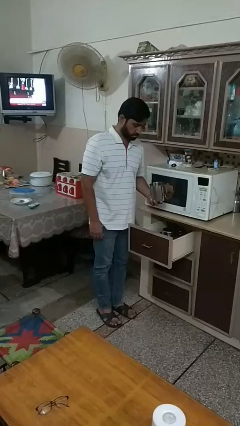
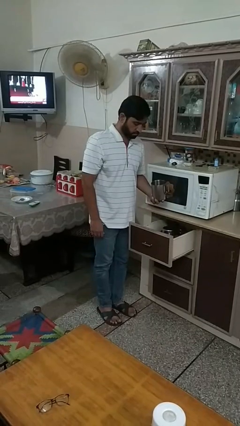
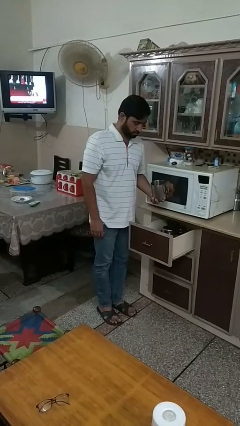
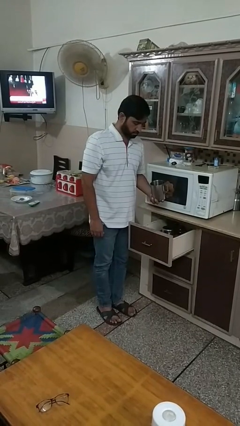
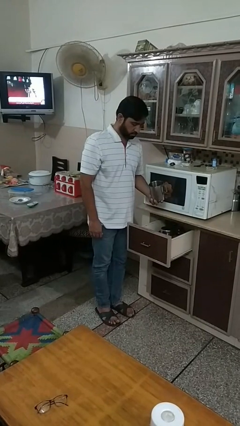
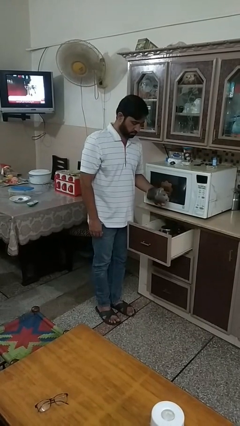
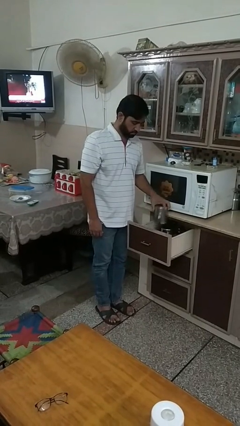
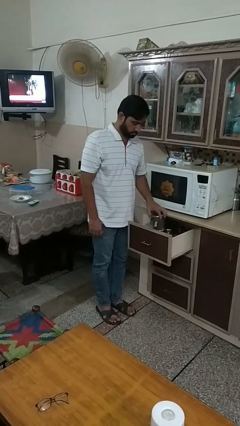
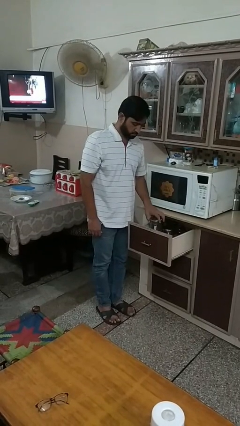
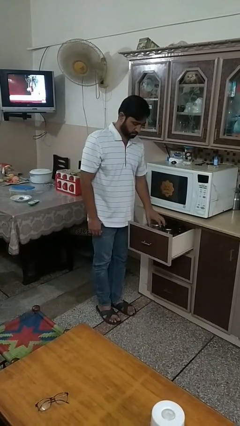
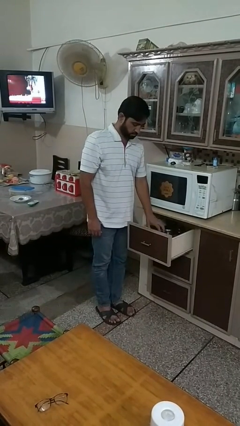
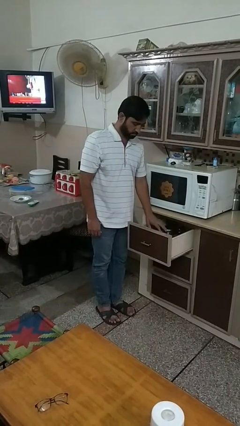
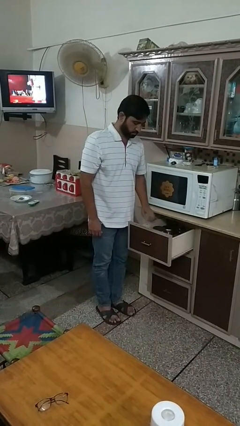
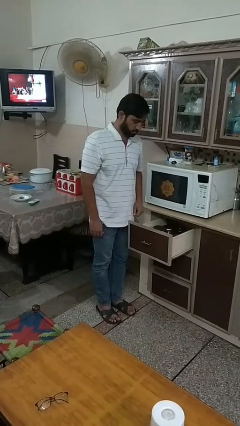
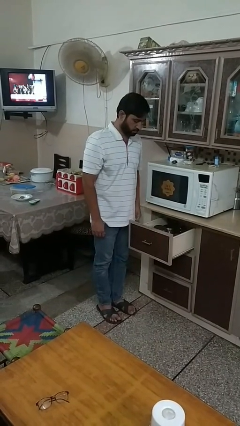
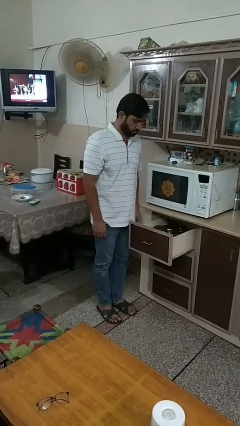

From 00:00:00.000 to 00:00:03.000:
person puts object into kitchen drawer

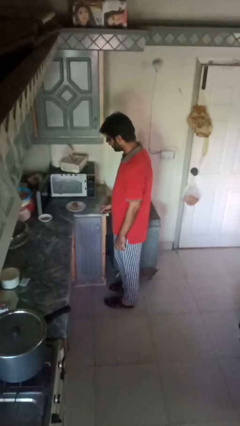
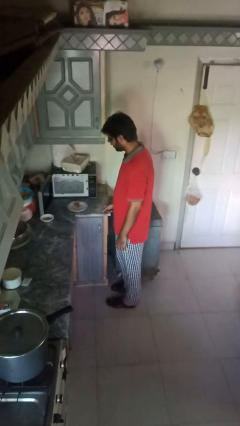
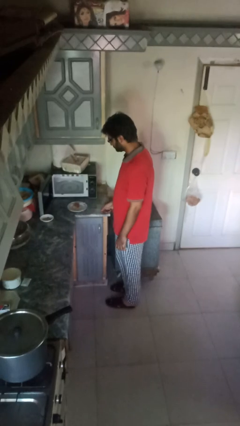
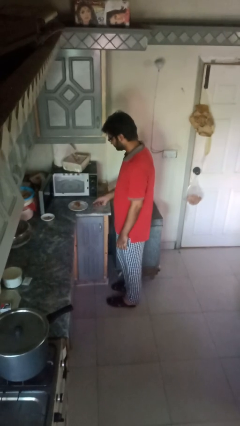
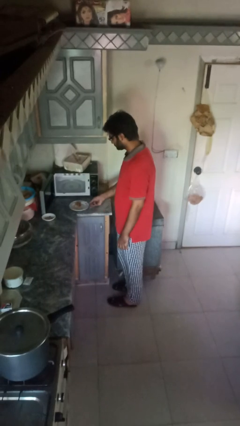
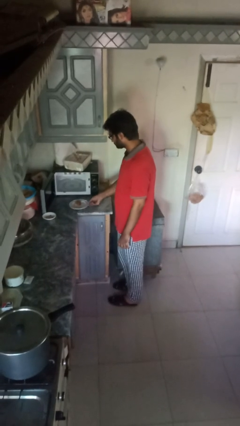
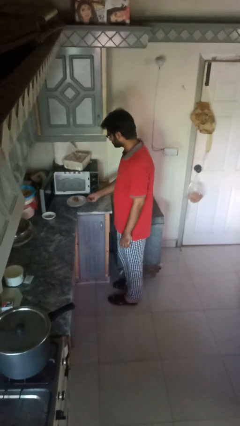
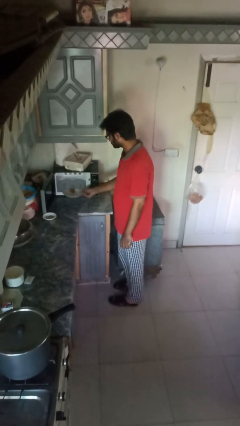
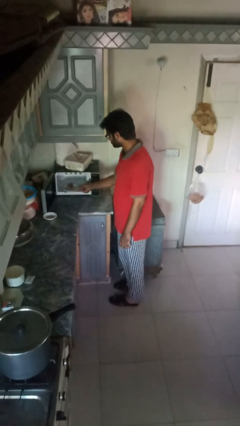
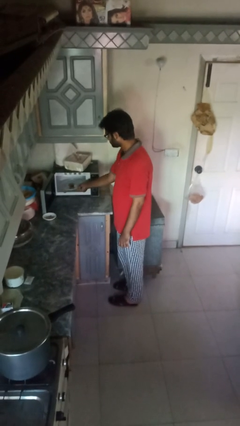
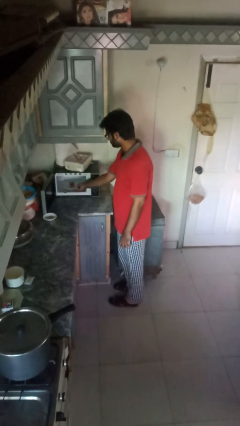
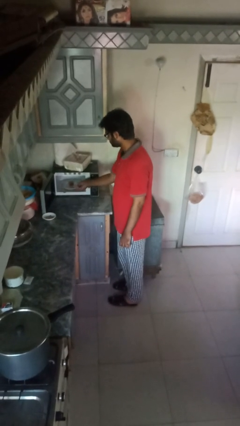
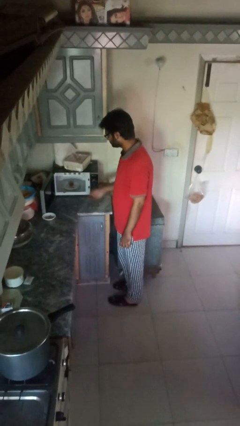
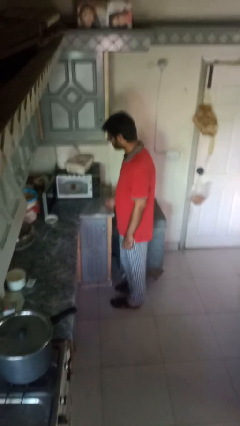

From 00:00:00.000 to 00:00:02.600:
person puts object into oven

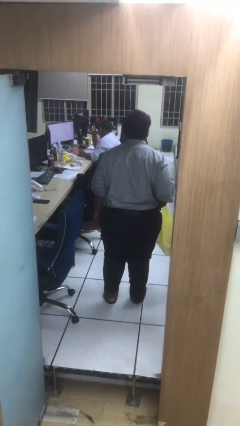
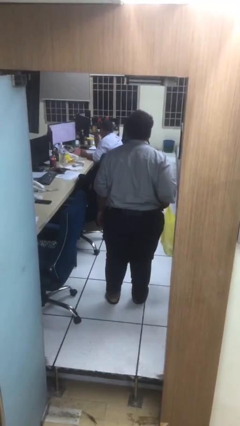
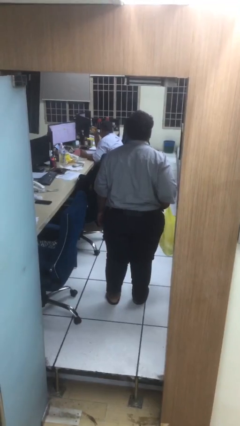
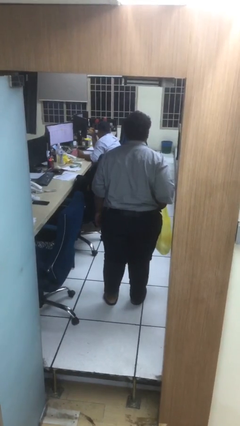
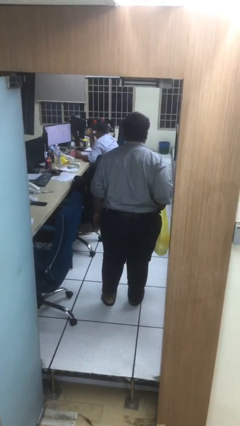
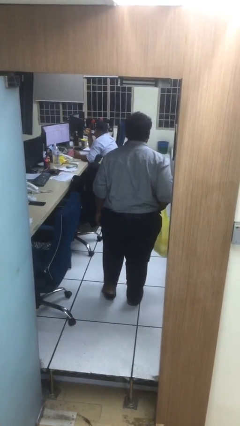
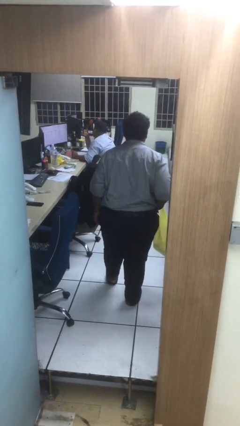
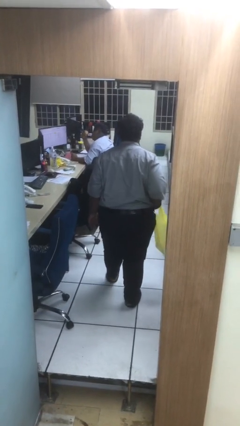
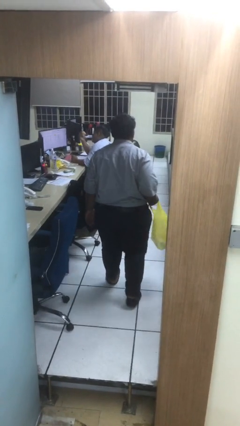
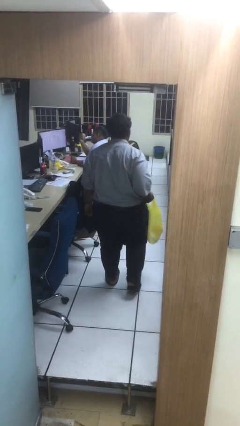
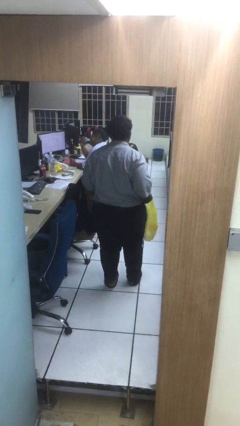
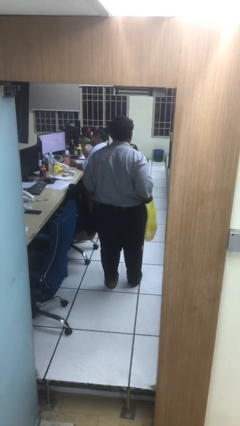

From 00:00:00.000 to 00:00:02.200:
person carries groceries

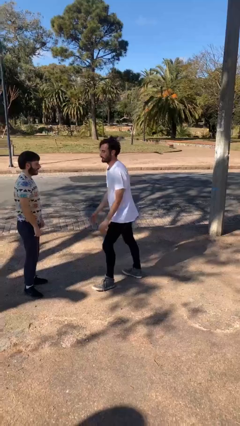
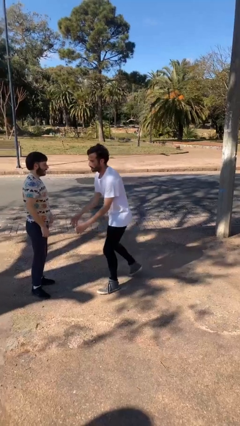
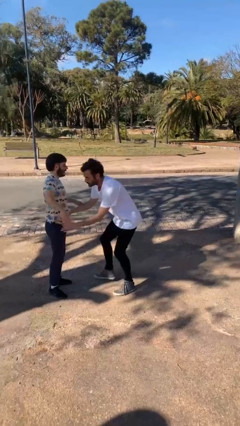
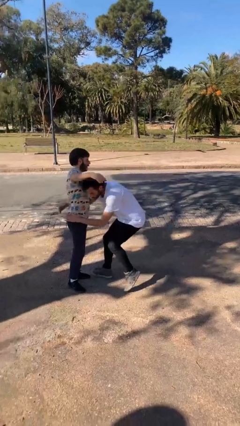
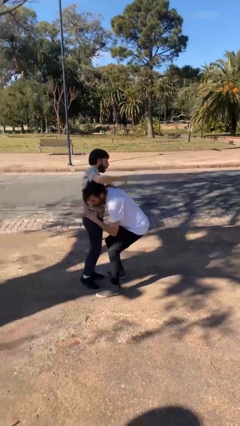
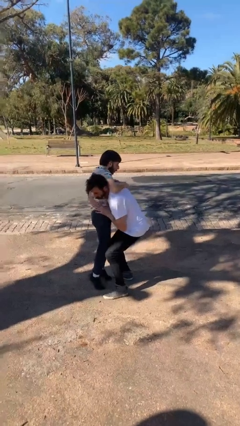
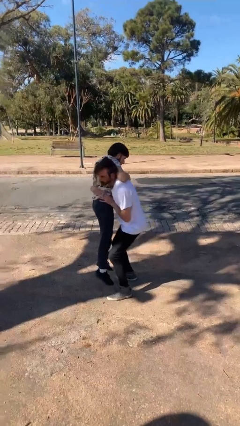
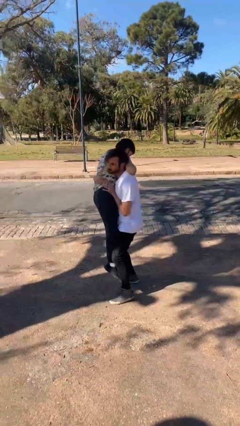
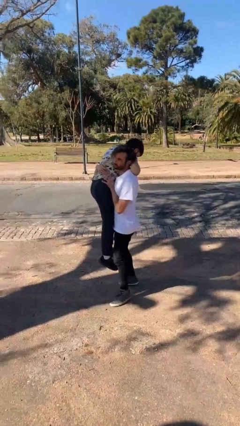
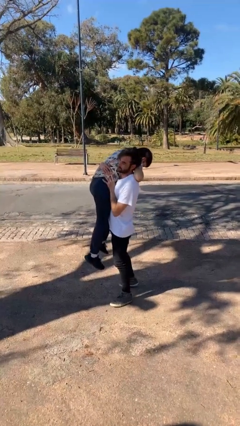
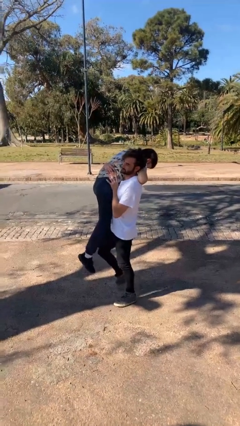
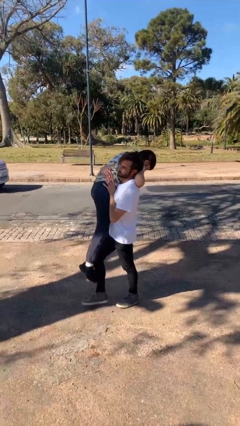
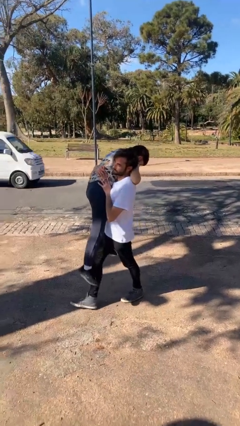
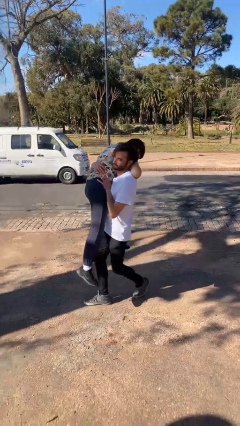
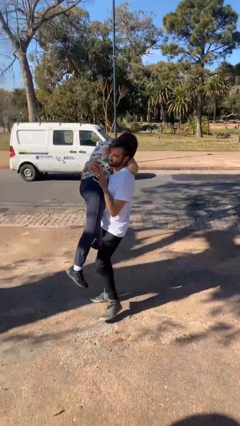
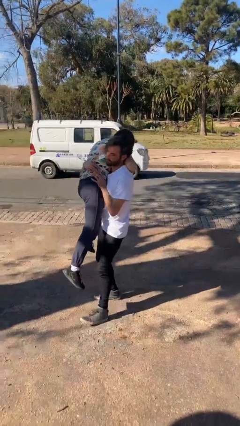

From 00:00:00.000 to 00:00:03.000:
person carries person over shoulder

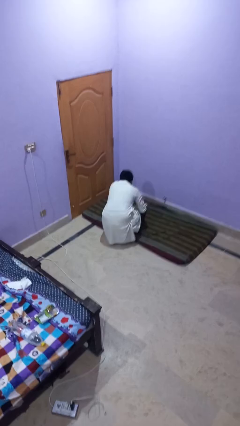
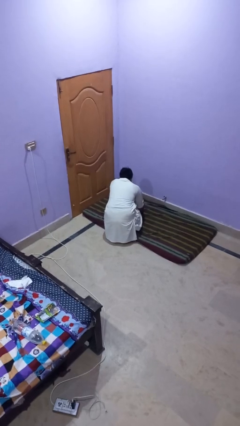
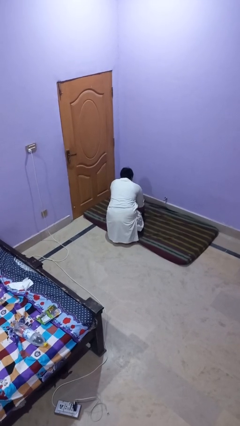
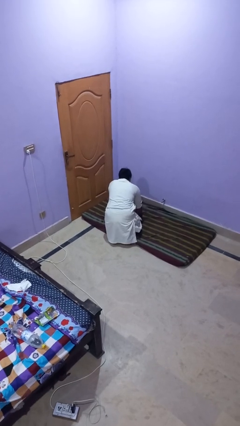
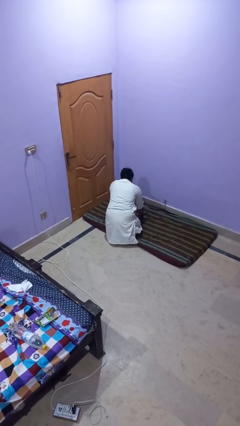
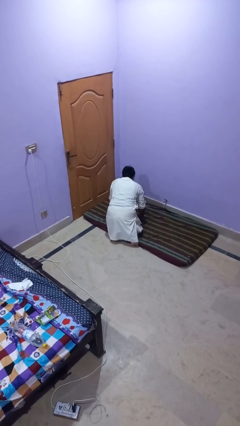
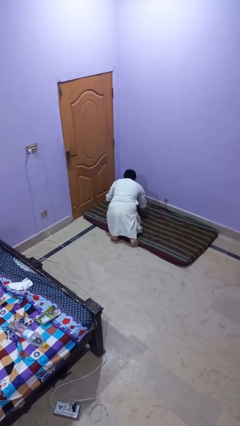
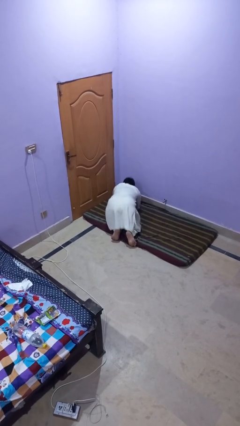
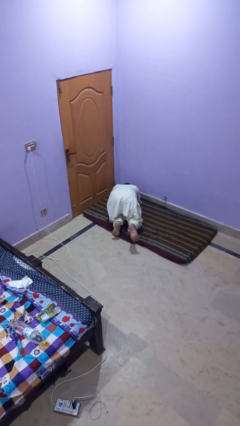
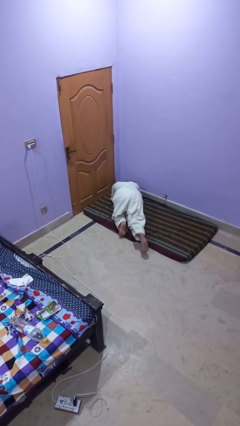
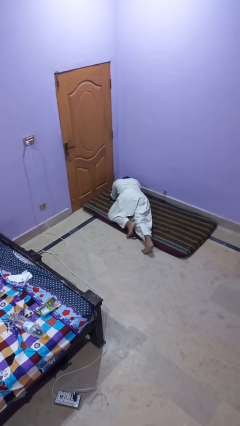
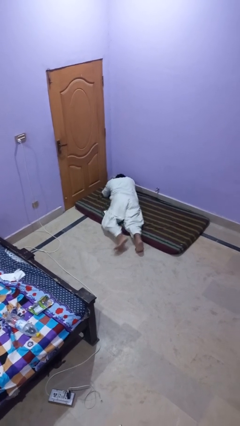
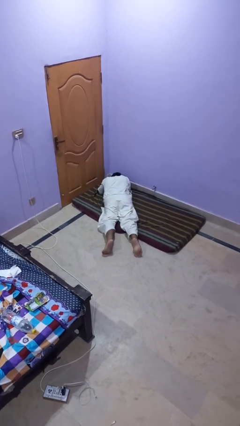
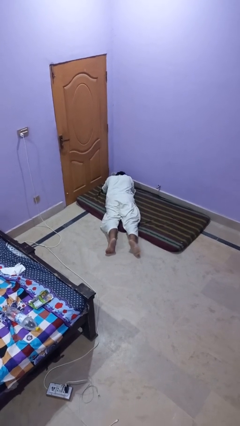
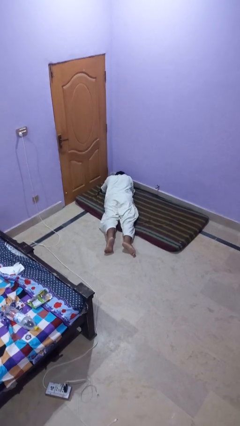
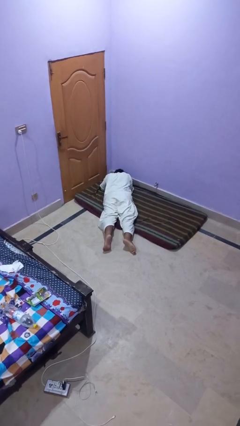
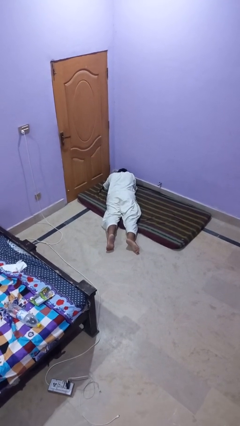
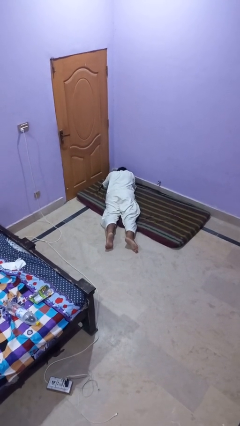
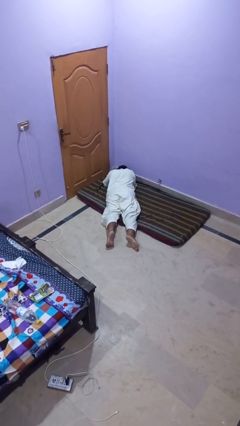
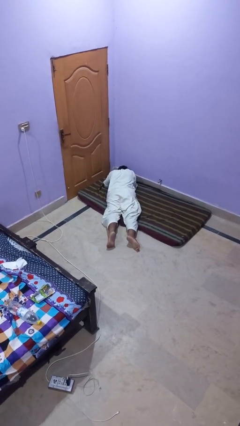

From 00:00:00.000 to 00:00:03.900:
person lies down on floor

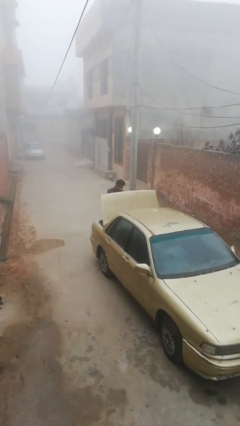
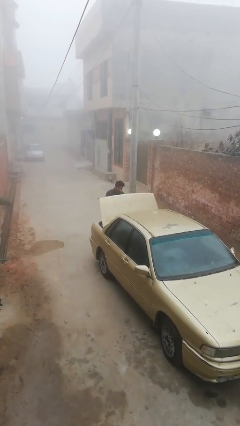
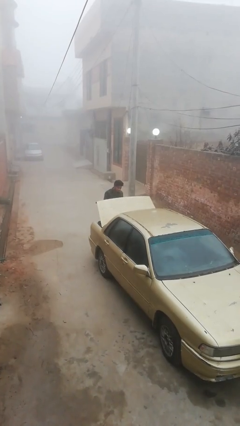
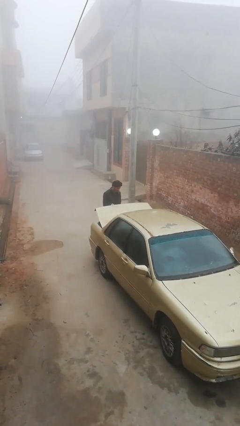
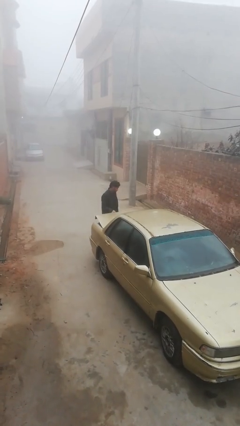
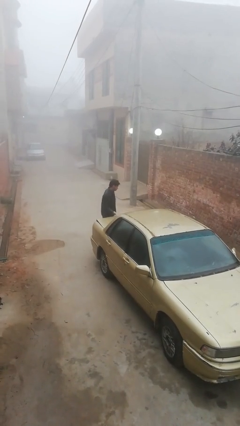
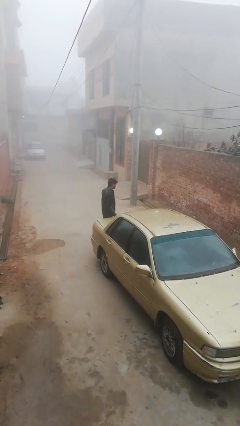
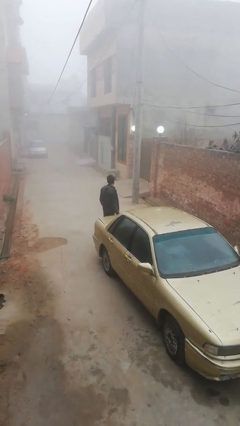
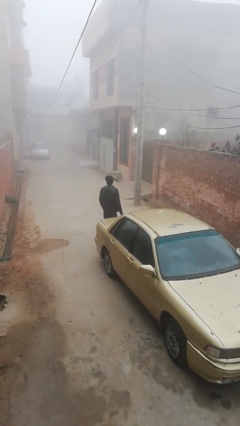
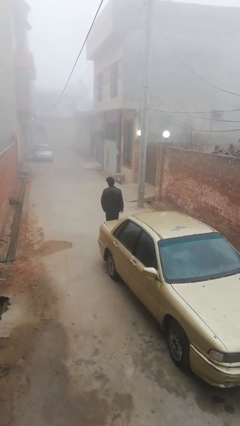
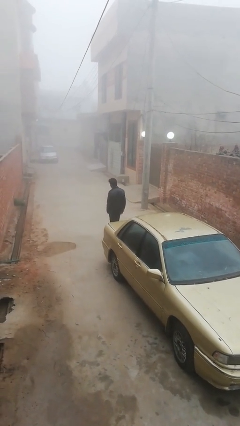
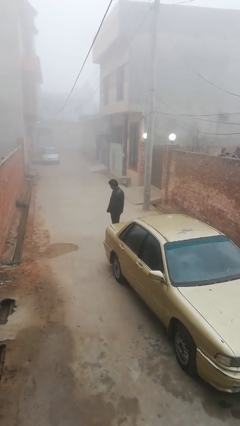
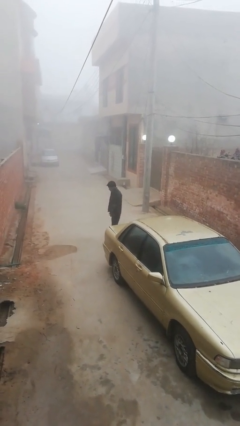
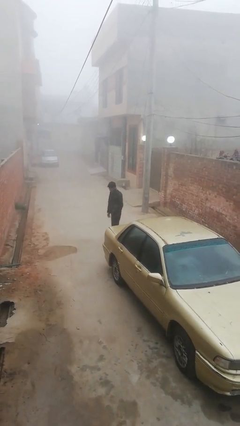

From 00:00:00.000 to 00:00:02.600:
person closes car trunk
